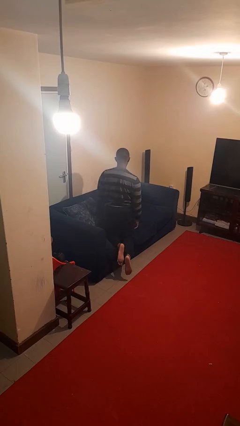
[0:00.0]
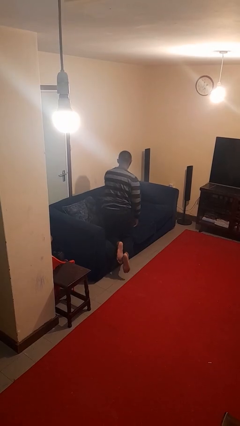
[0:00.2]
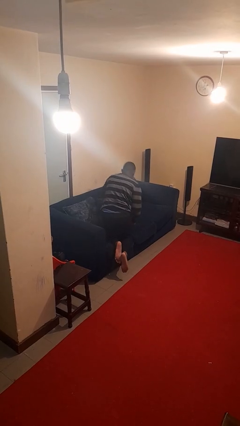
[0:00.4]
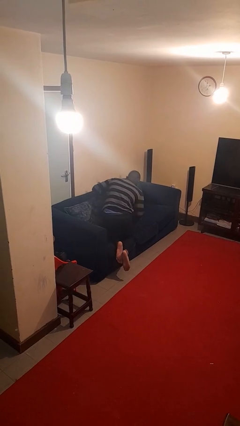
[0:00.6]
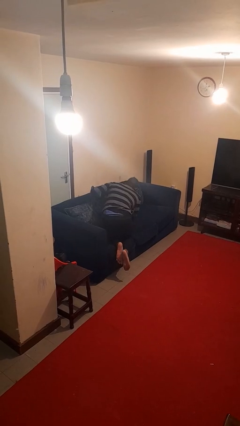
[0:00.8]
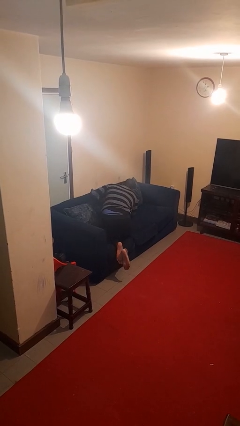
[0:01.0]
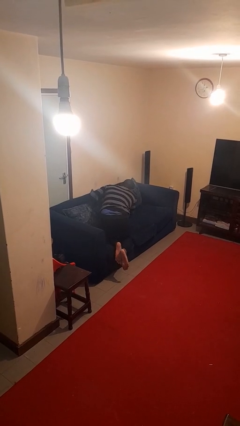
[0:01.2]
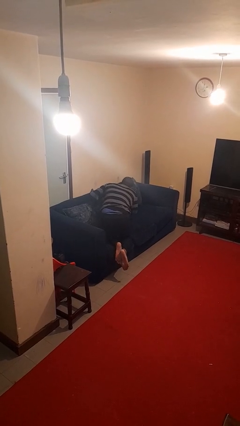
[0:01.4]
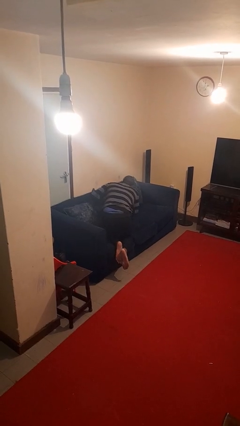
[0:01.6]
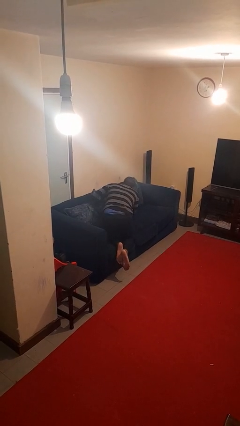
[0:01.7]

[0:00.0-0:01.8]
person searches in couch

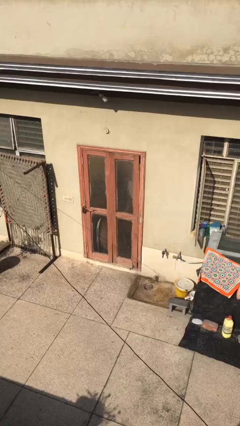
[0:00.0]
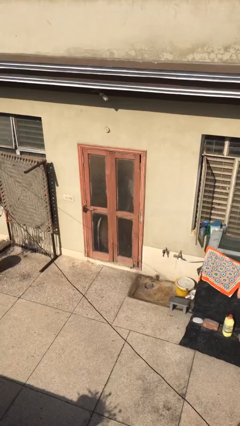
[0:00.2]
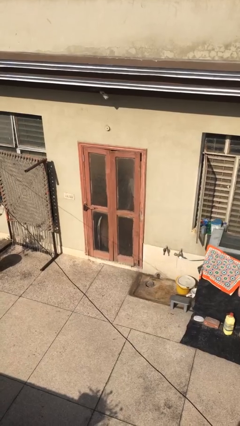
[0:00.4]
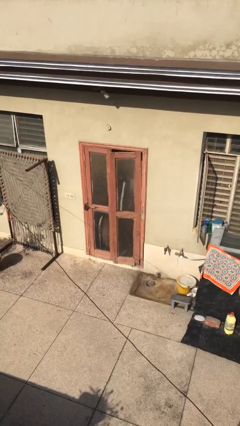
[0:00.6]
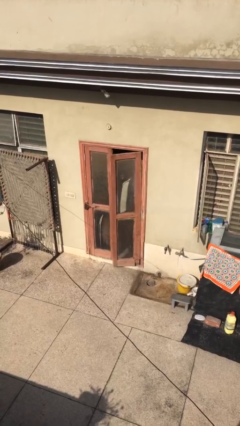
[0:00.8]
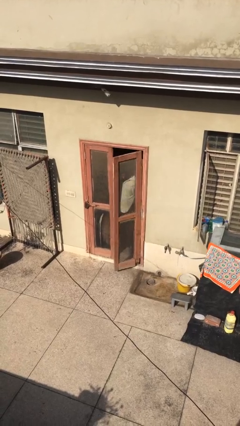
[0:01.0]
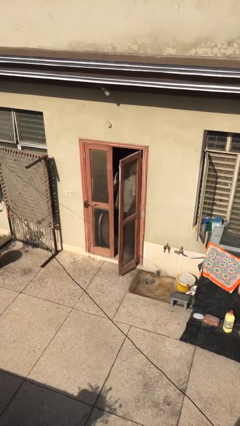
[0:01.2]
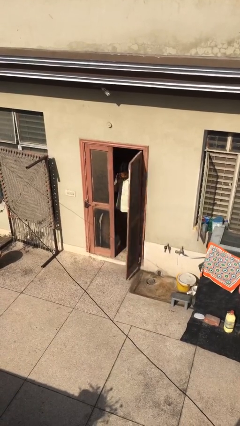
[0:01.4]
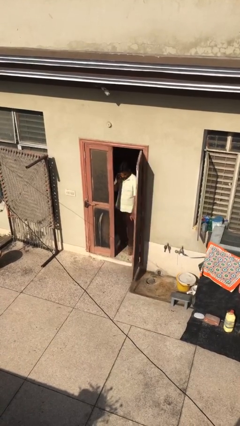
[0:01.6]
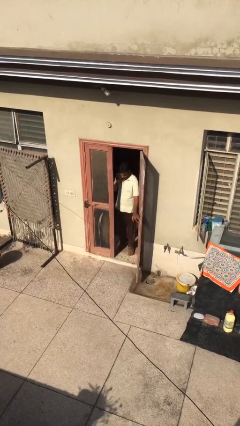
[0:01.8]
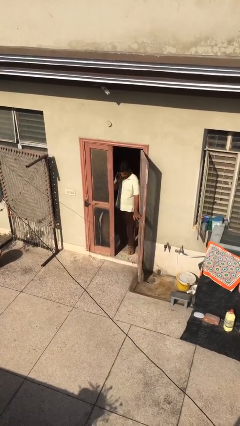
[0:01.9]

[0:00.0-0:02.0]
person opens facility door

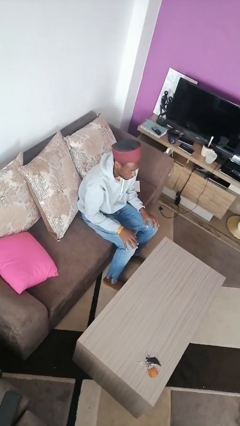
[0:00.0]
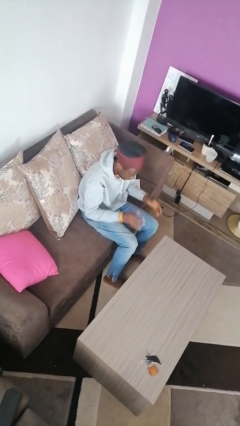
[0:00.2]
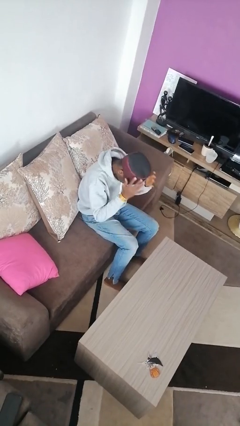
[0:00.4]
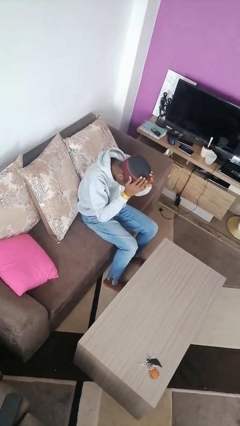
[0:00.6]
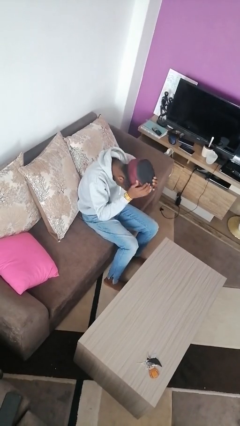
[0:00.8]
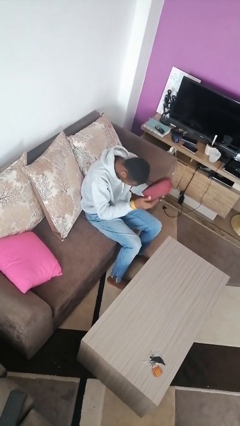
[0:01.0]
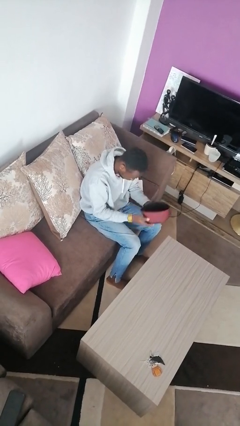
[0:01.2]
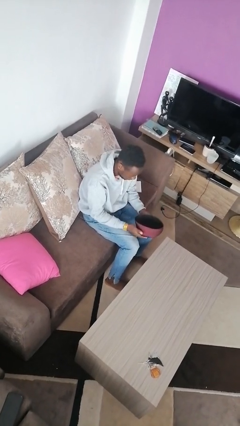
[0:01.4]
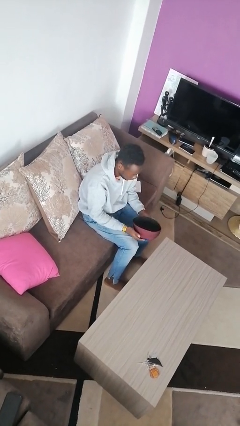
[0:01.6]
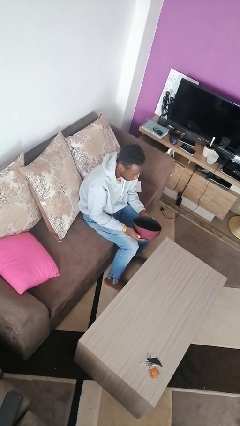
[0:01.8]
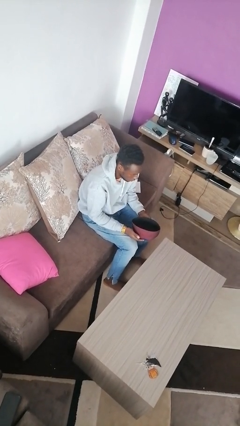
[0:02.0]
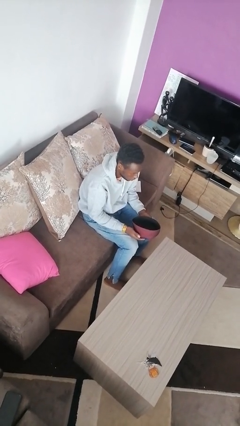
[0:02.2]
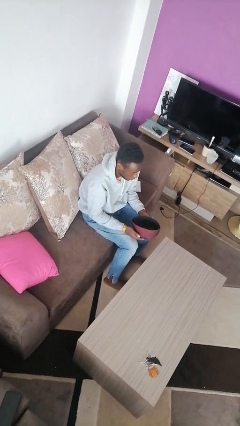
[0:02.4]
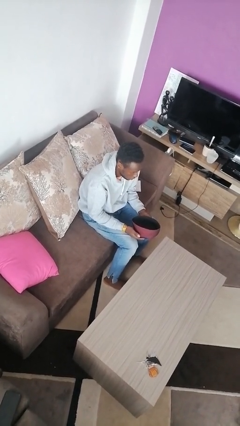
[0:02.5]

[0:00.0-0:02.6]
person takes off hat

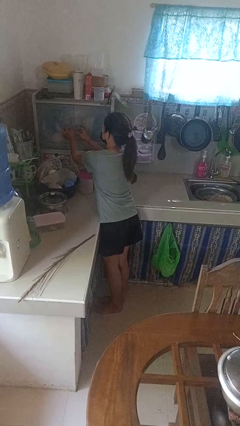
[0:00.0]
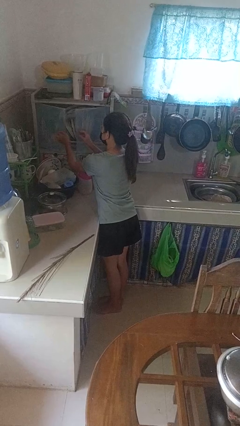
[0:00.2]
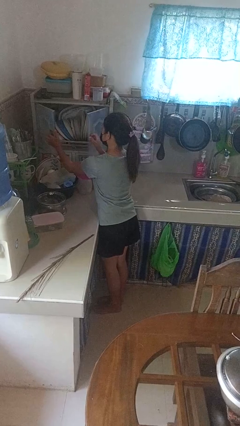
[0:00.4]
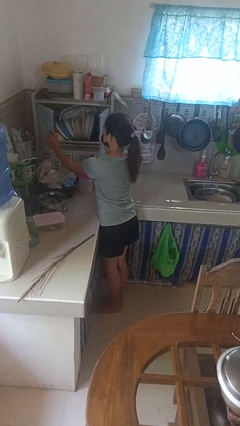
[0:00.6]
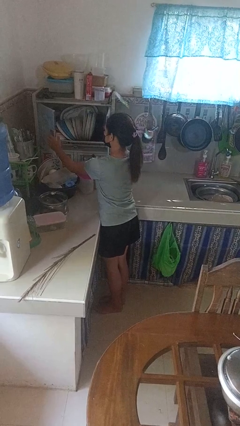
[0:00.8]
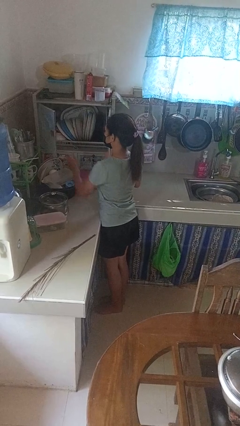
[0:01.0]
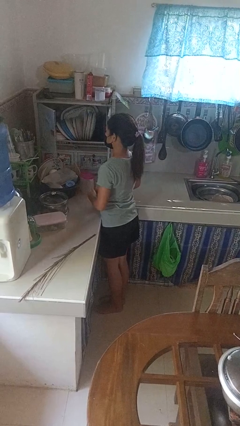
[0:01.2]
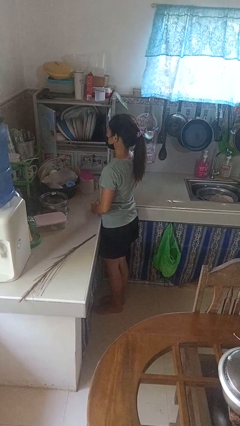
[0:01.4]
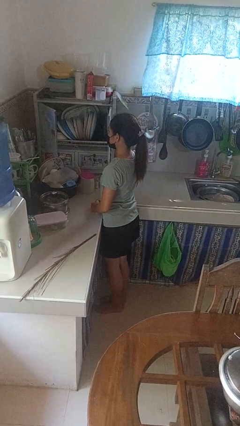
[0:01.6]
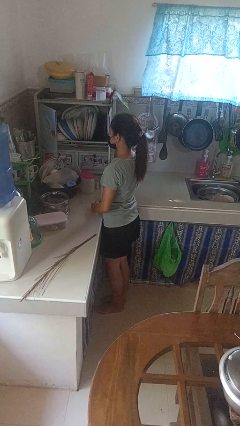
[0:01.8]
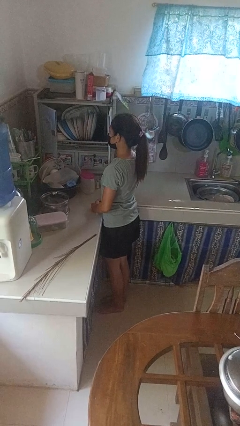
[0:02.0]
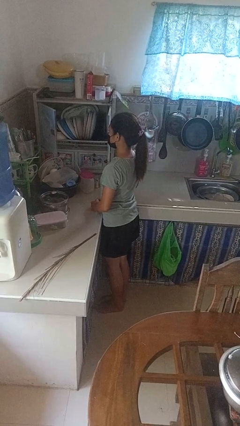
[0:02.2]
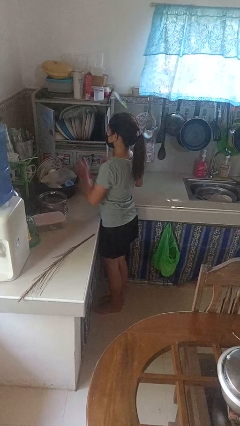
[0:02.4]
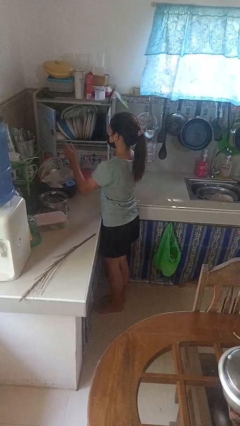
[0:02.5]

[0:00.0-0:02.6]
person opens kitchen drawer

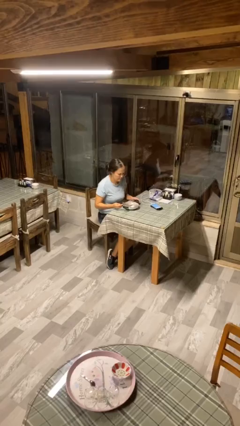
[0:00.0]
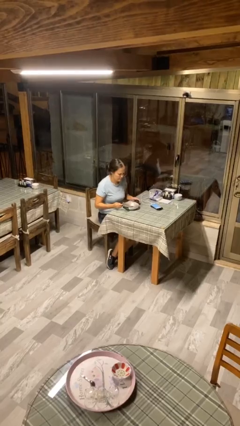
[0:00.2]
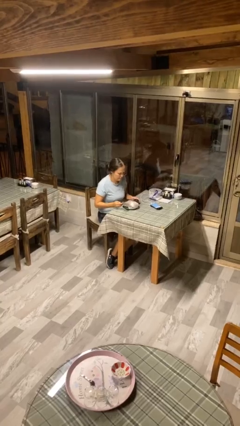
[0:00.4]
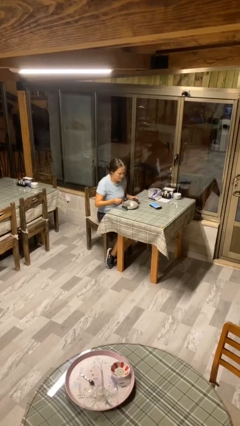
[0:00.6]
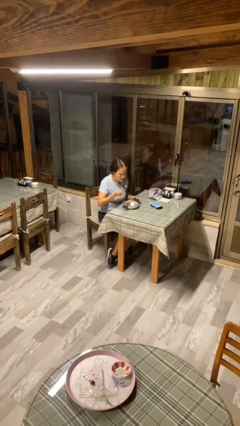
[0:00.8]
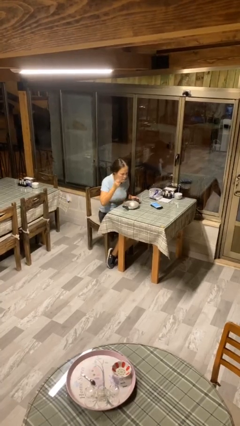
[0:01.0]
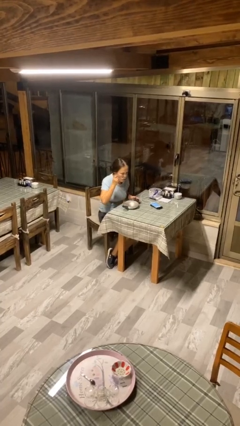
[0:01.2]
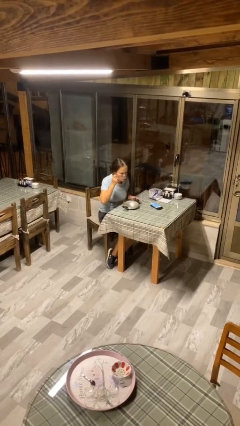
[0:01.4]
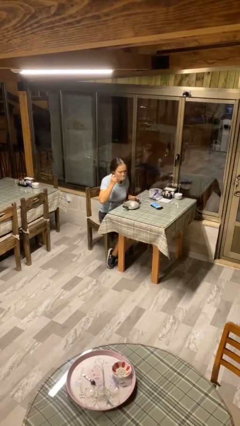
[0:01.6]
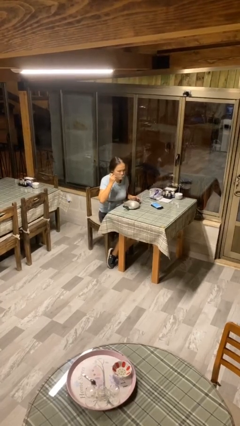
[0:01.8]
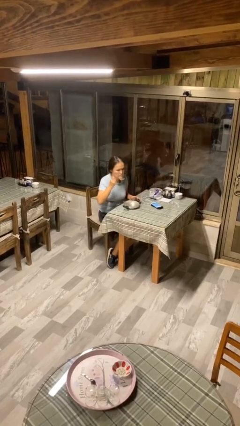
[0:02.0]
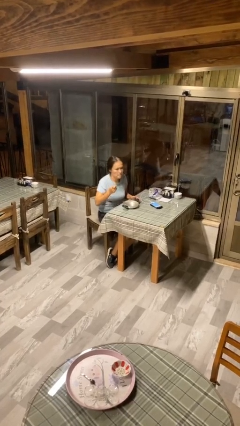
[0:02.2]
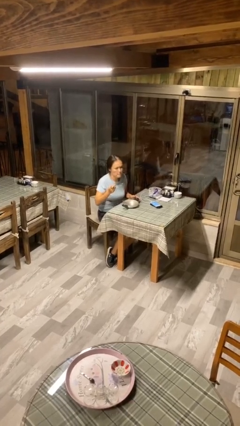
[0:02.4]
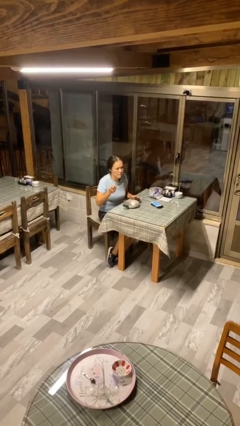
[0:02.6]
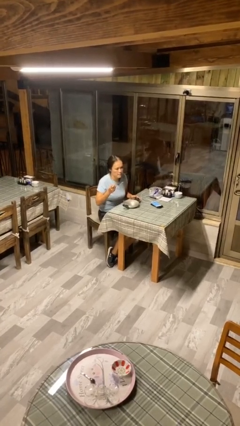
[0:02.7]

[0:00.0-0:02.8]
person eats with utensil

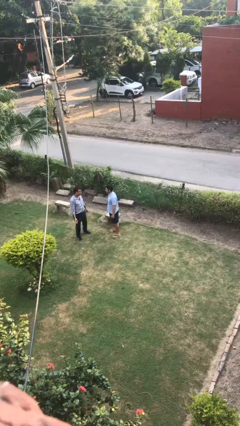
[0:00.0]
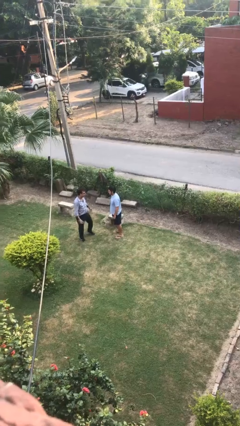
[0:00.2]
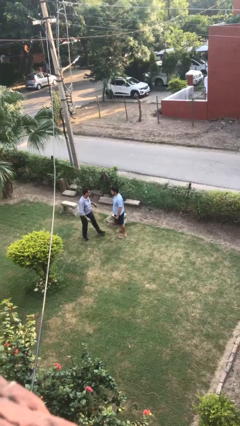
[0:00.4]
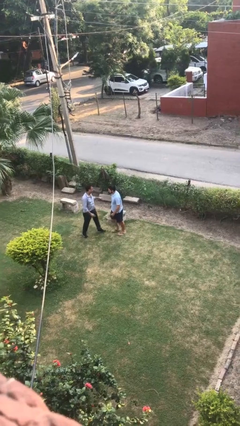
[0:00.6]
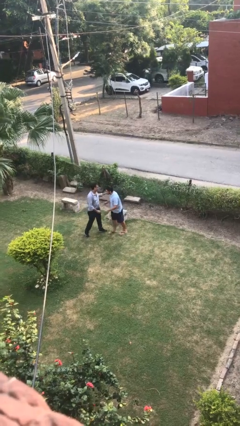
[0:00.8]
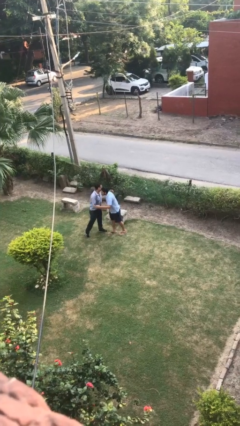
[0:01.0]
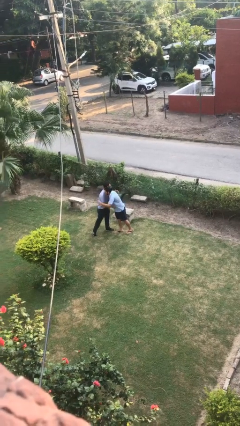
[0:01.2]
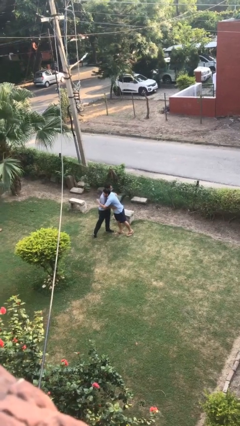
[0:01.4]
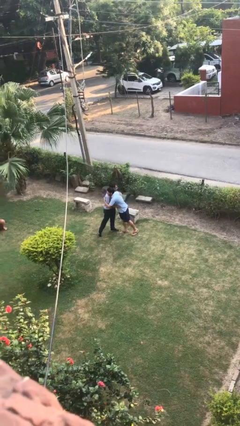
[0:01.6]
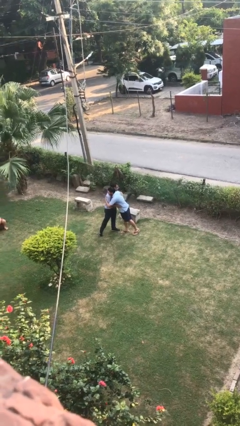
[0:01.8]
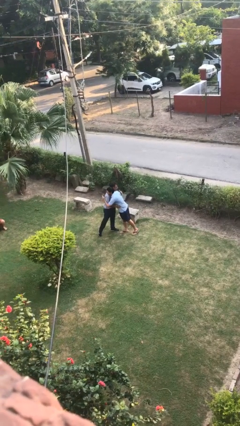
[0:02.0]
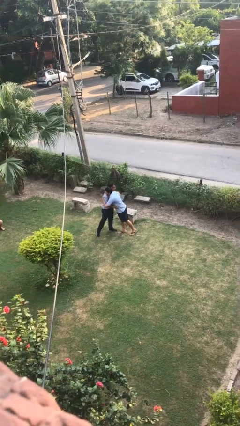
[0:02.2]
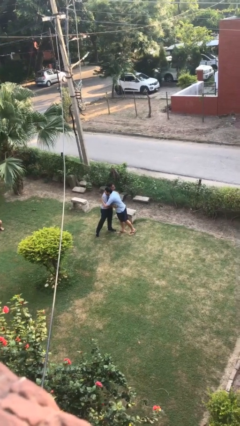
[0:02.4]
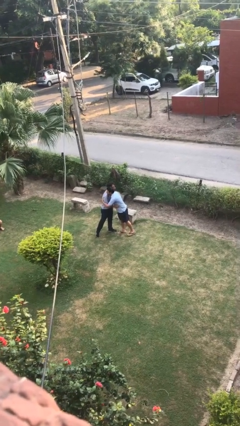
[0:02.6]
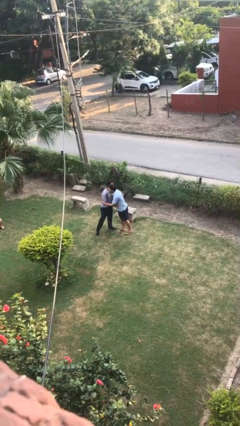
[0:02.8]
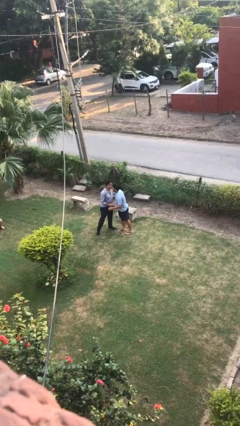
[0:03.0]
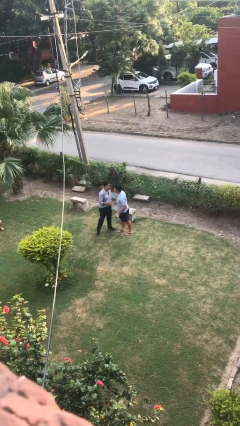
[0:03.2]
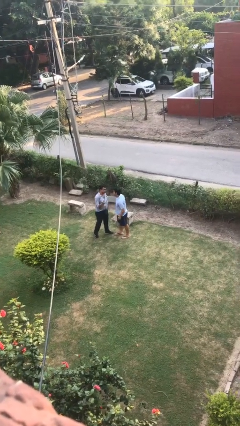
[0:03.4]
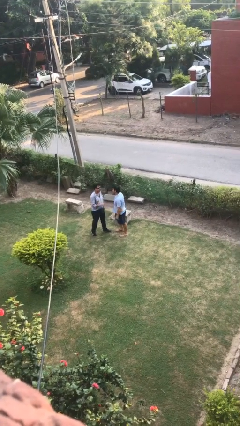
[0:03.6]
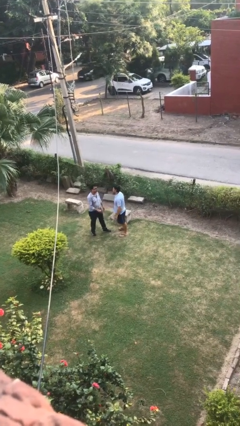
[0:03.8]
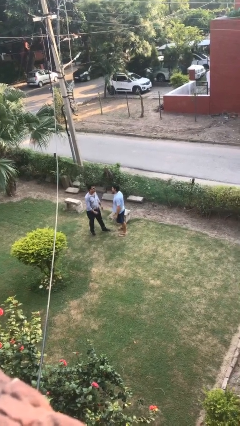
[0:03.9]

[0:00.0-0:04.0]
person embraces person

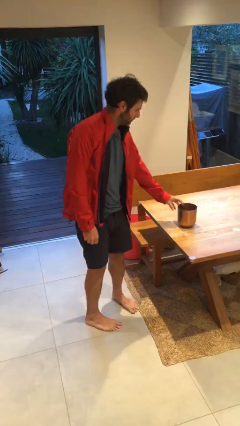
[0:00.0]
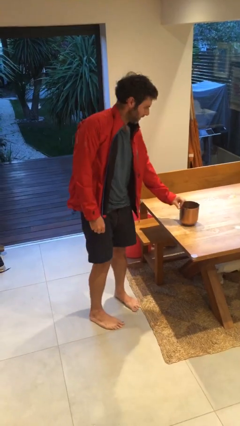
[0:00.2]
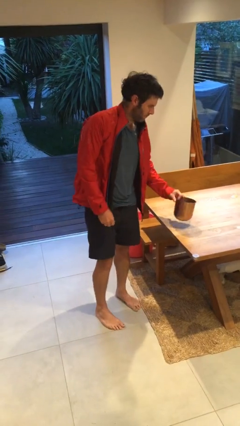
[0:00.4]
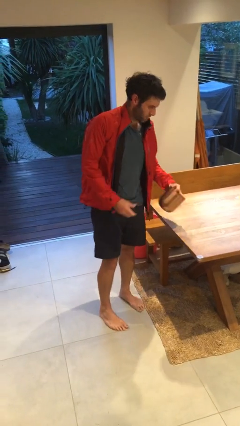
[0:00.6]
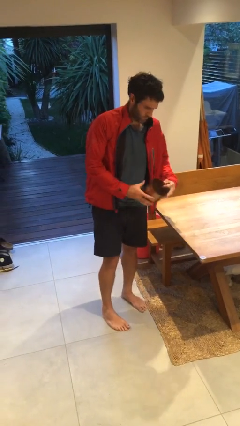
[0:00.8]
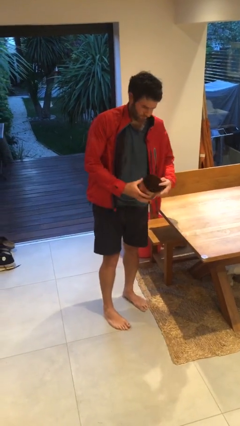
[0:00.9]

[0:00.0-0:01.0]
person picks up object from table
